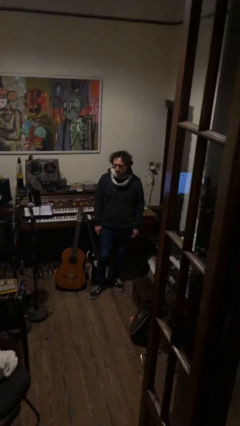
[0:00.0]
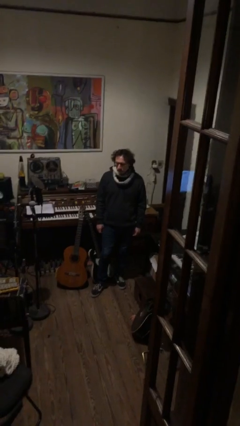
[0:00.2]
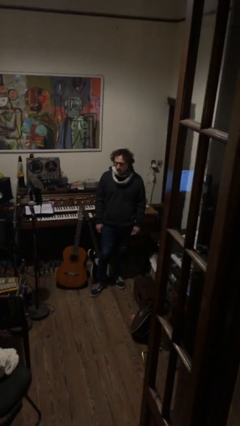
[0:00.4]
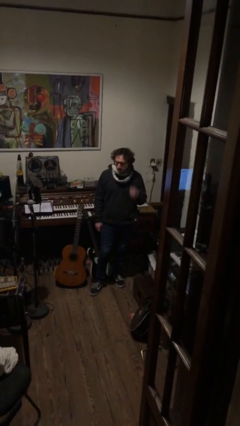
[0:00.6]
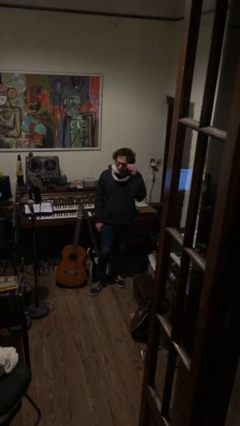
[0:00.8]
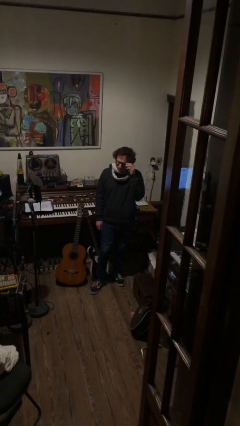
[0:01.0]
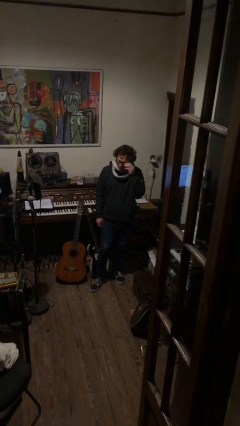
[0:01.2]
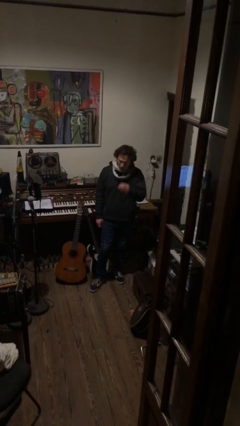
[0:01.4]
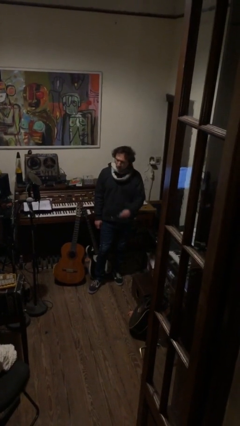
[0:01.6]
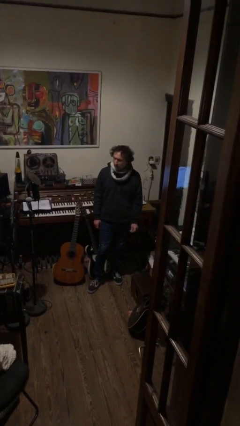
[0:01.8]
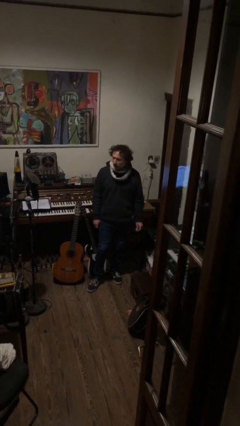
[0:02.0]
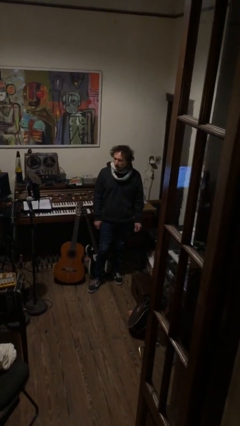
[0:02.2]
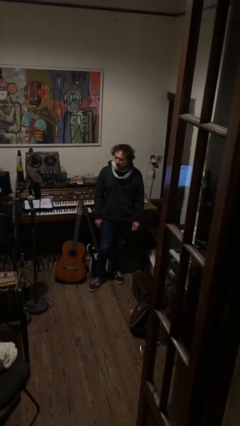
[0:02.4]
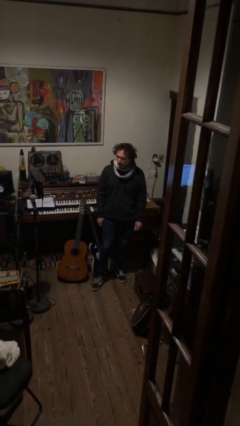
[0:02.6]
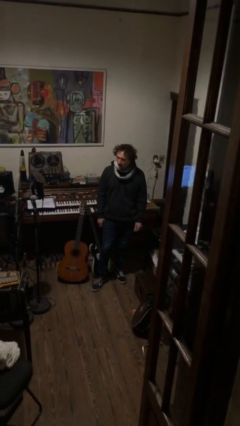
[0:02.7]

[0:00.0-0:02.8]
person takes off glasses

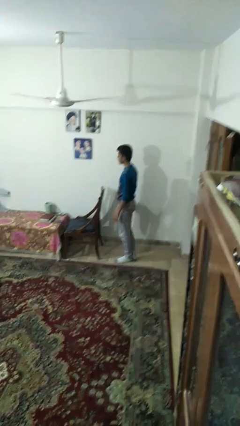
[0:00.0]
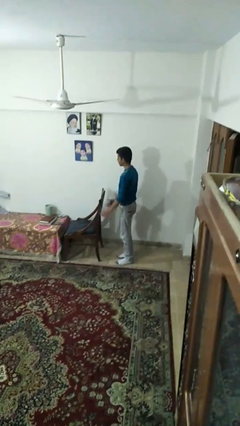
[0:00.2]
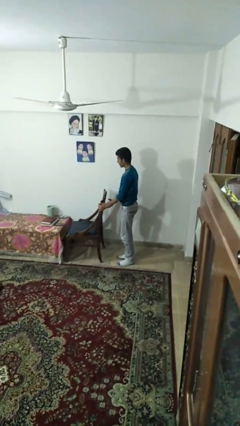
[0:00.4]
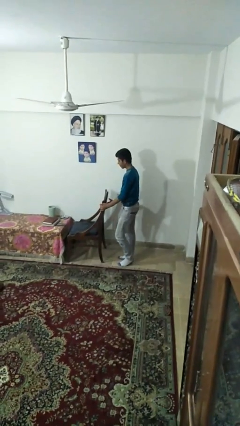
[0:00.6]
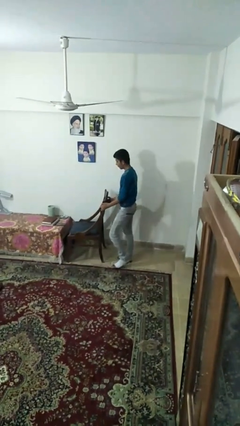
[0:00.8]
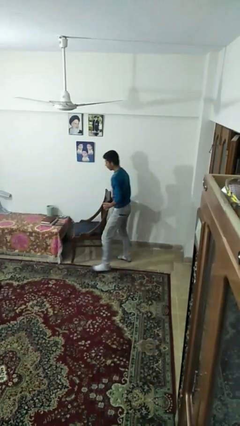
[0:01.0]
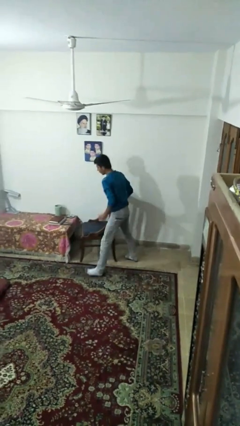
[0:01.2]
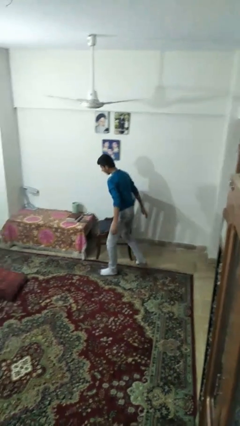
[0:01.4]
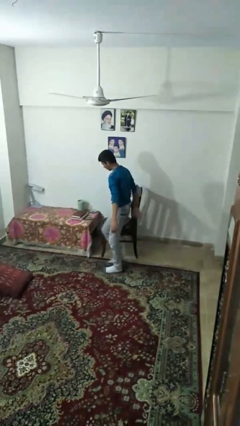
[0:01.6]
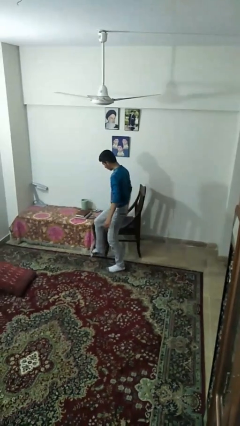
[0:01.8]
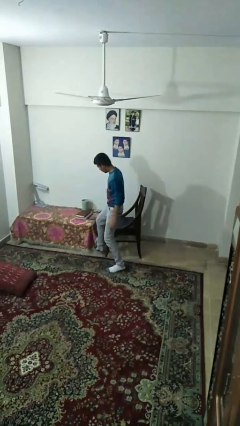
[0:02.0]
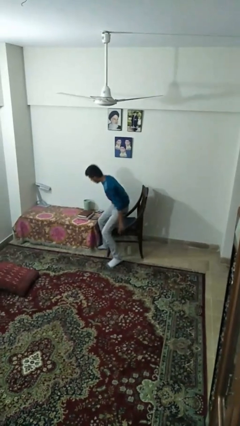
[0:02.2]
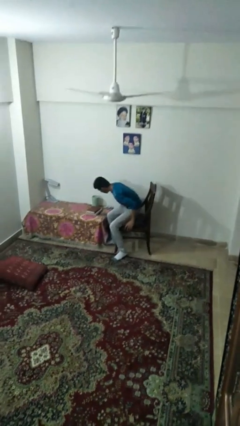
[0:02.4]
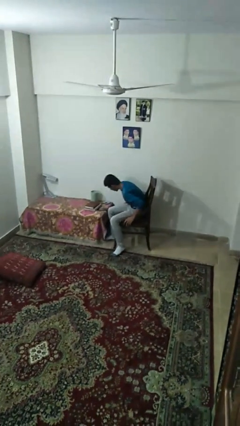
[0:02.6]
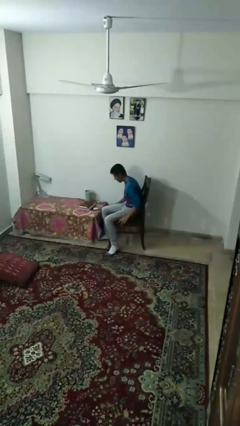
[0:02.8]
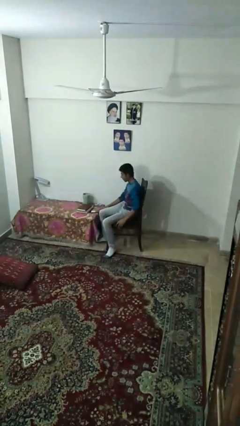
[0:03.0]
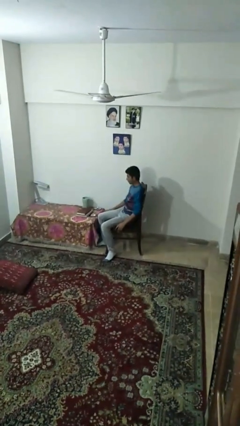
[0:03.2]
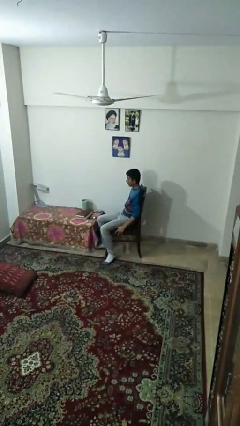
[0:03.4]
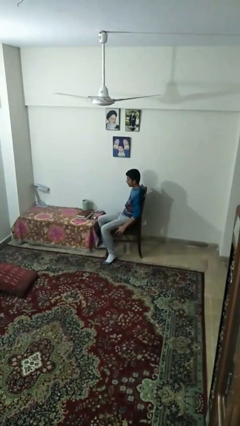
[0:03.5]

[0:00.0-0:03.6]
person sits down

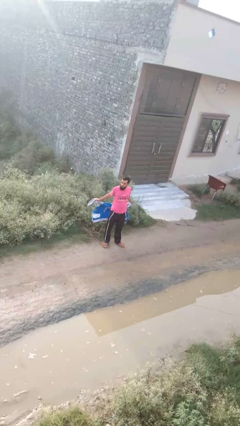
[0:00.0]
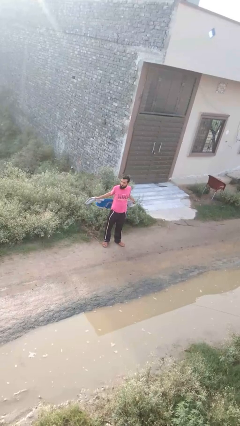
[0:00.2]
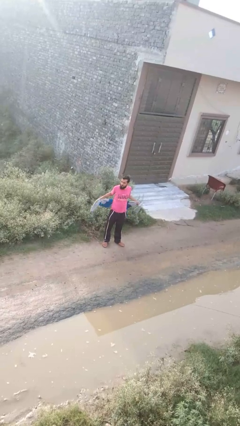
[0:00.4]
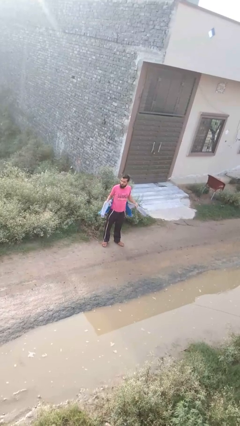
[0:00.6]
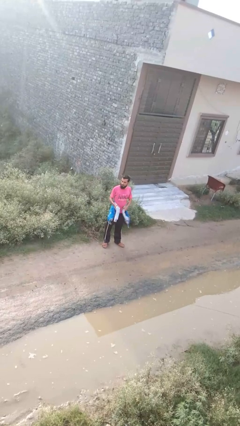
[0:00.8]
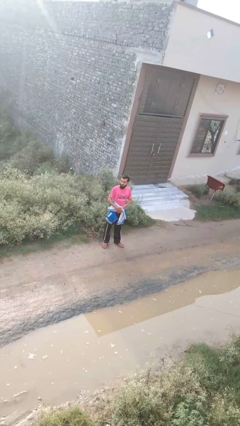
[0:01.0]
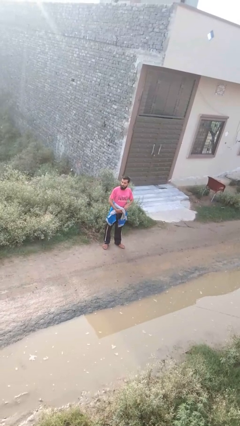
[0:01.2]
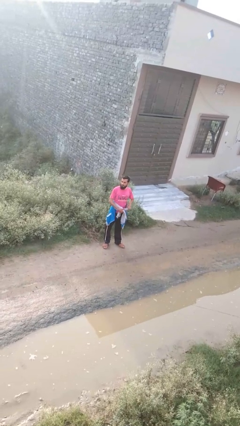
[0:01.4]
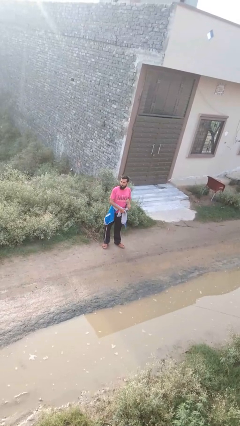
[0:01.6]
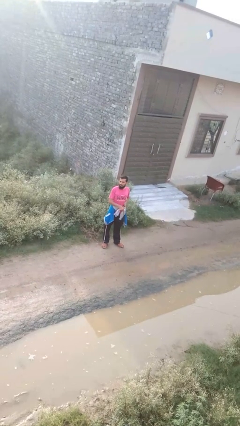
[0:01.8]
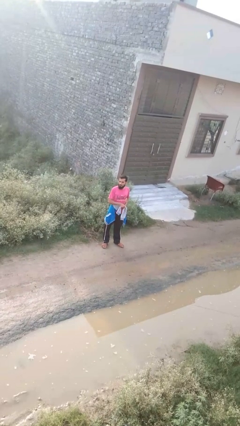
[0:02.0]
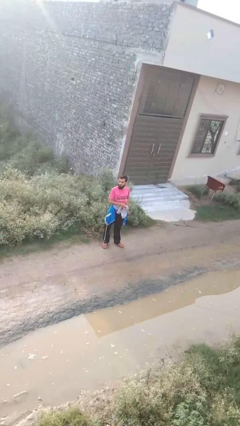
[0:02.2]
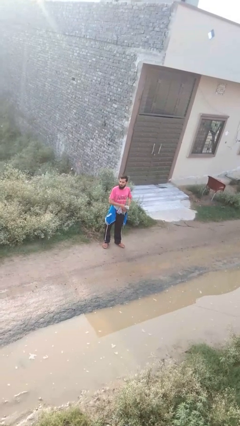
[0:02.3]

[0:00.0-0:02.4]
person ties jacket around waist

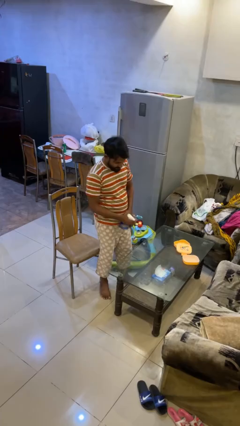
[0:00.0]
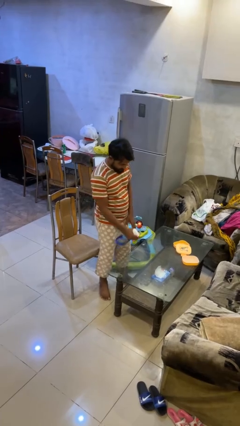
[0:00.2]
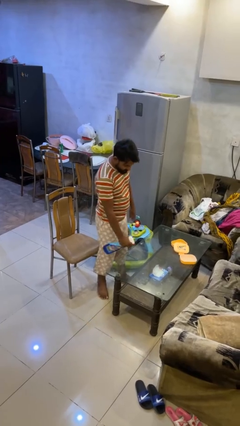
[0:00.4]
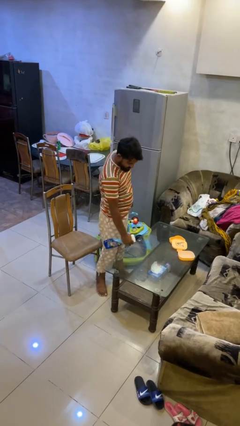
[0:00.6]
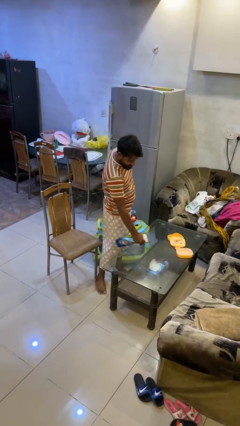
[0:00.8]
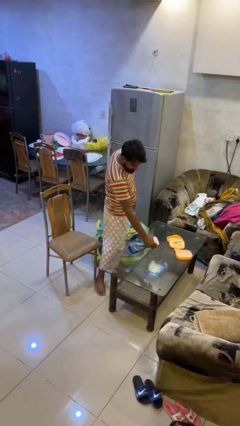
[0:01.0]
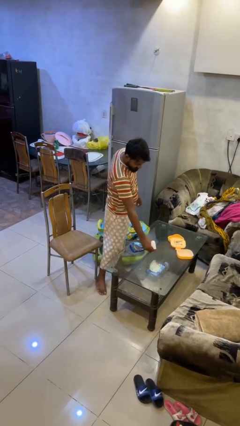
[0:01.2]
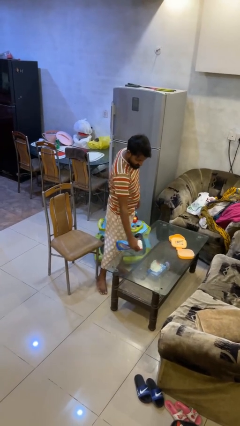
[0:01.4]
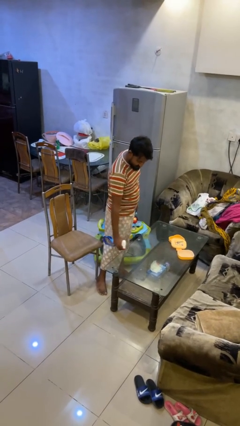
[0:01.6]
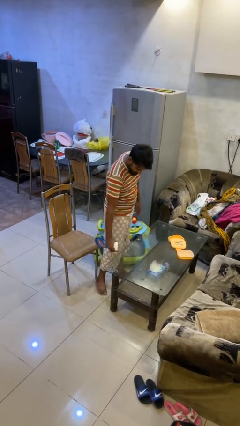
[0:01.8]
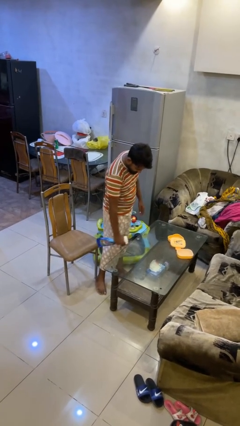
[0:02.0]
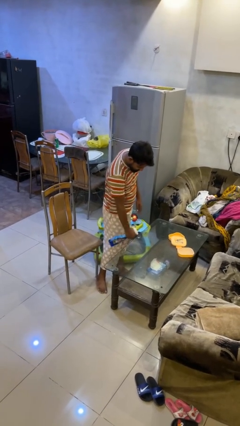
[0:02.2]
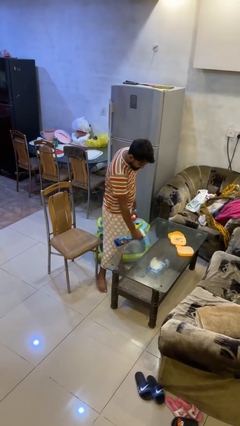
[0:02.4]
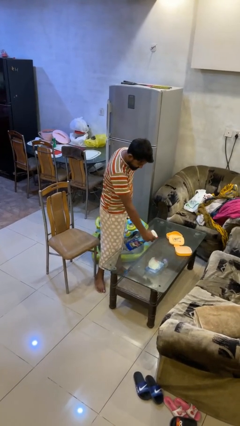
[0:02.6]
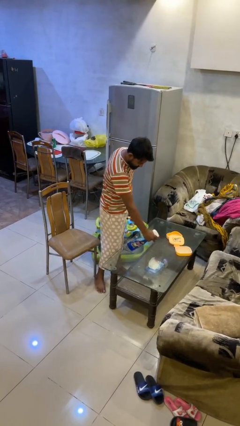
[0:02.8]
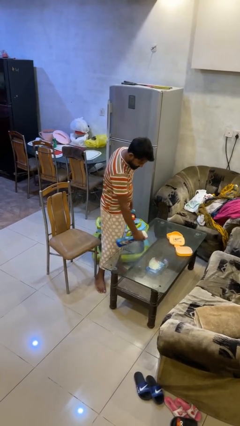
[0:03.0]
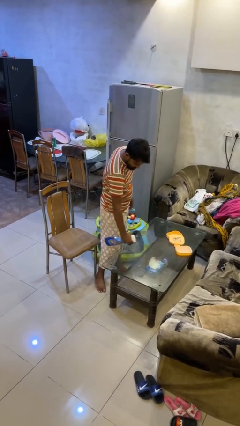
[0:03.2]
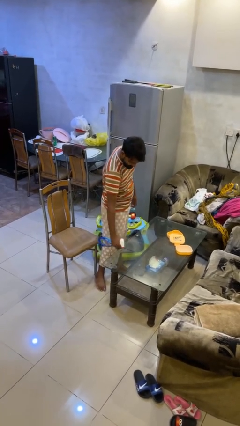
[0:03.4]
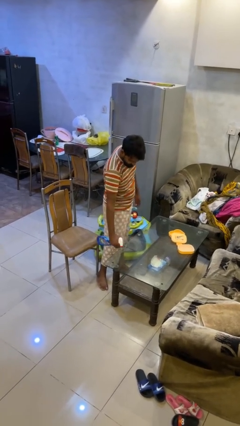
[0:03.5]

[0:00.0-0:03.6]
person sprays from bottle

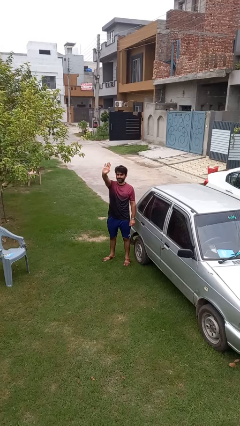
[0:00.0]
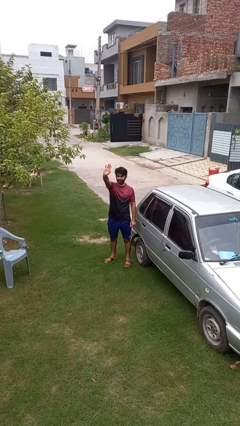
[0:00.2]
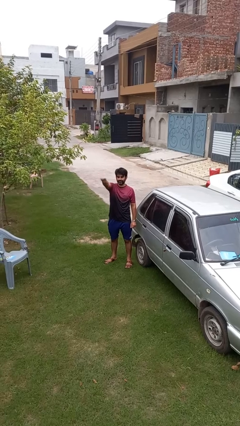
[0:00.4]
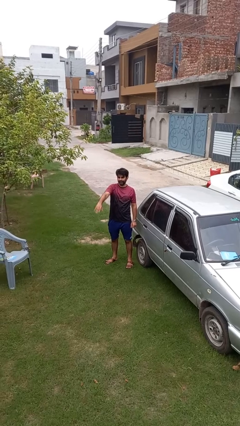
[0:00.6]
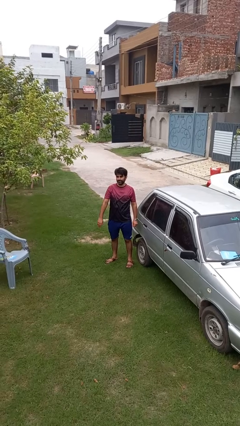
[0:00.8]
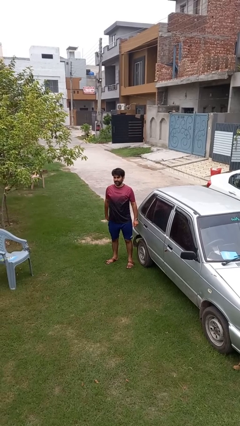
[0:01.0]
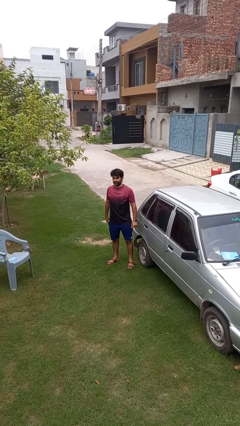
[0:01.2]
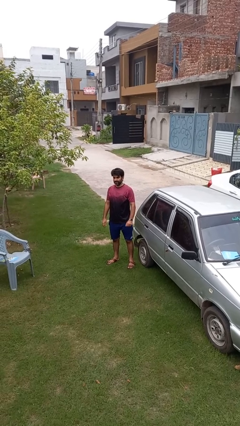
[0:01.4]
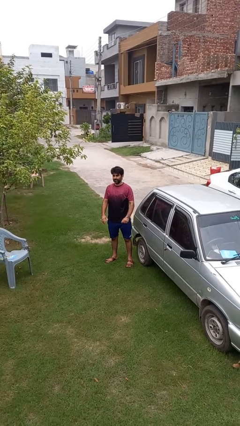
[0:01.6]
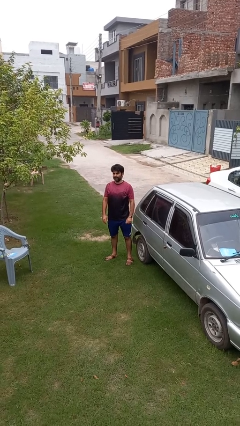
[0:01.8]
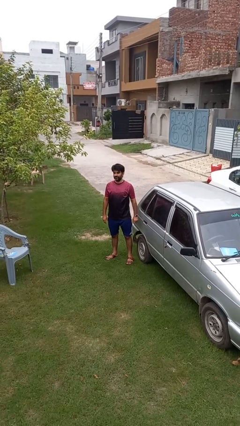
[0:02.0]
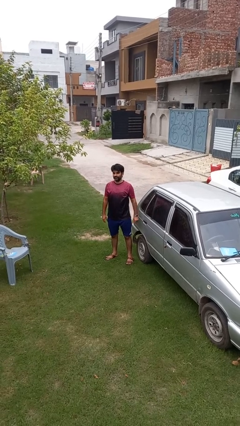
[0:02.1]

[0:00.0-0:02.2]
person gestures lower hand

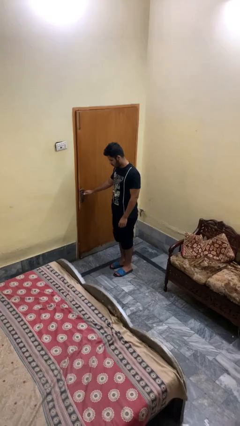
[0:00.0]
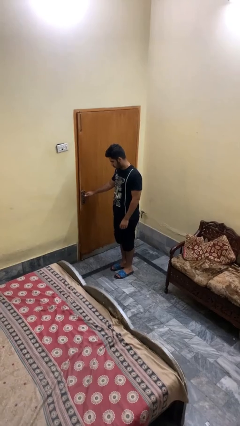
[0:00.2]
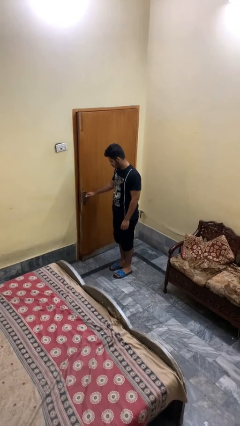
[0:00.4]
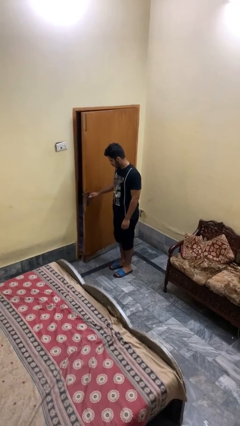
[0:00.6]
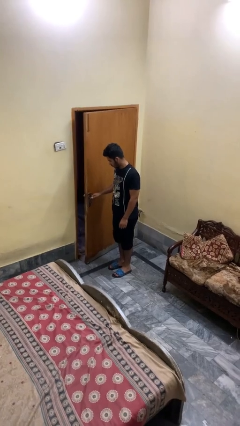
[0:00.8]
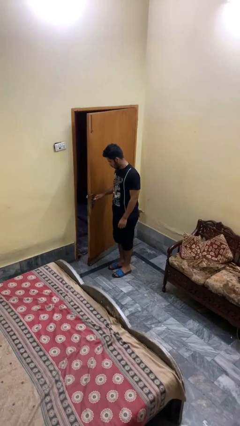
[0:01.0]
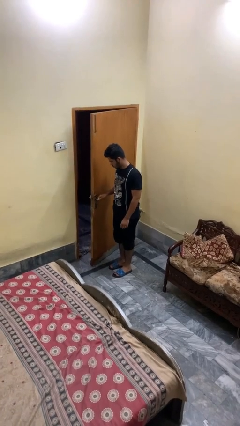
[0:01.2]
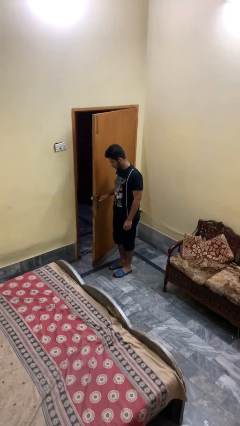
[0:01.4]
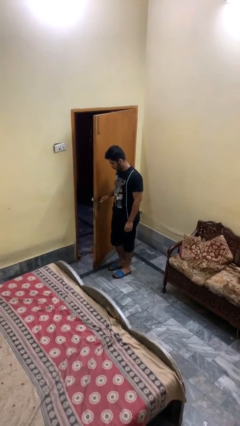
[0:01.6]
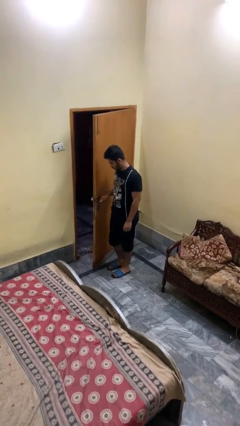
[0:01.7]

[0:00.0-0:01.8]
person opens facility door

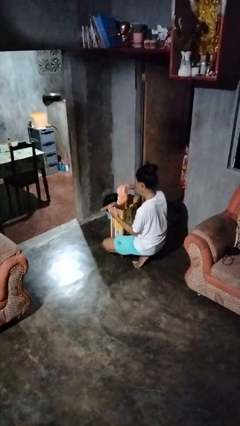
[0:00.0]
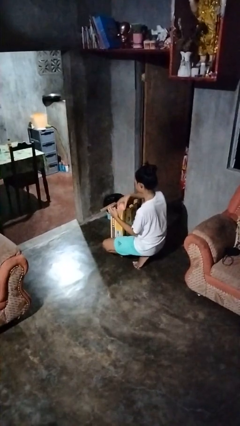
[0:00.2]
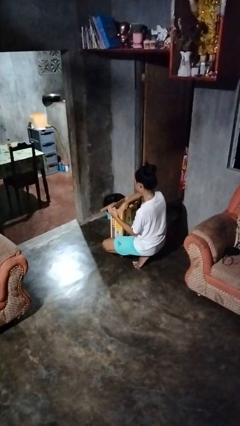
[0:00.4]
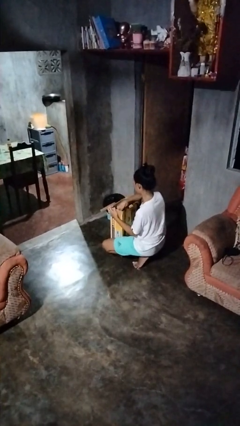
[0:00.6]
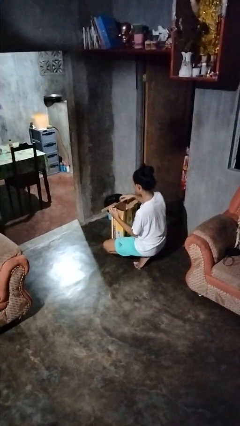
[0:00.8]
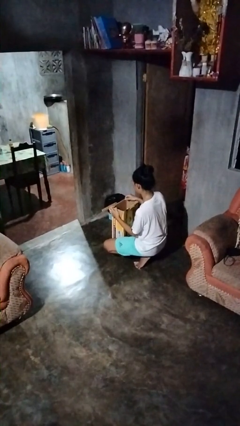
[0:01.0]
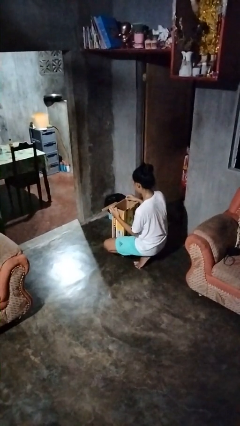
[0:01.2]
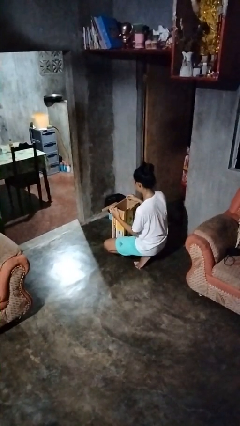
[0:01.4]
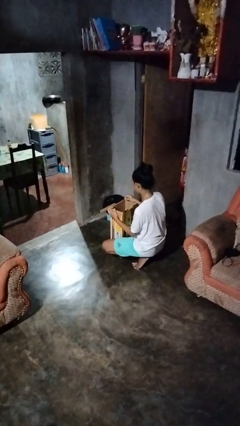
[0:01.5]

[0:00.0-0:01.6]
person puts object into box
